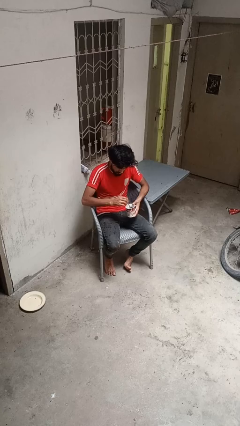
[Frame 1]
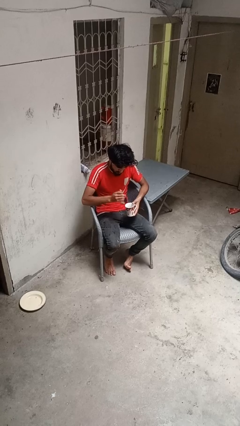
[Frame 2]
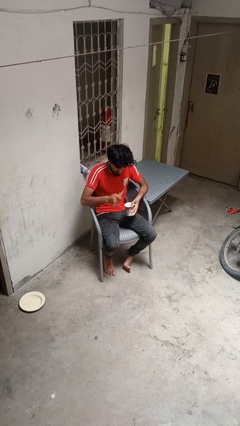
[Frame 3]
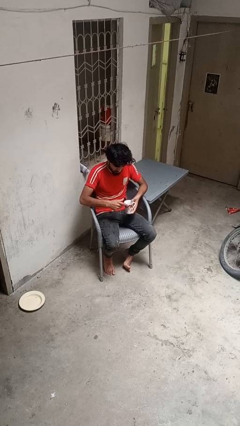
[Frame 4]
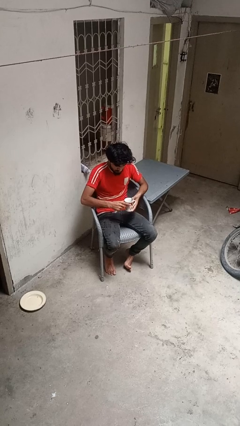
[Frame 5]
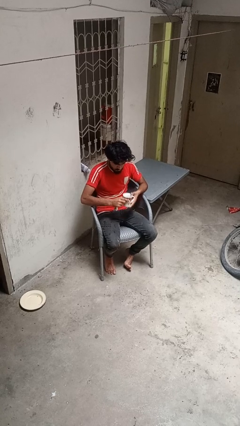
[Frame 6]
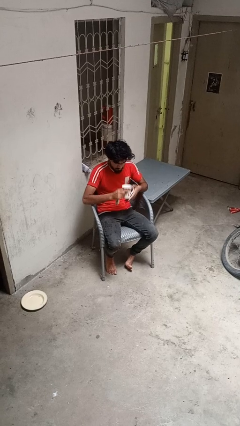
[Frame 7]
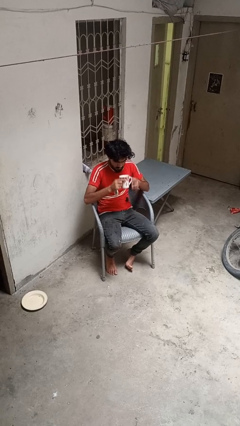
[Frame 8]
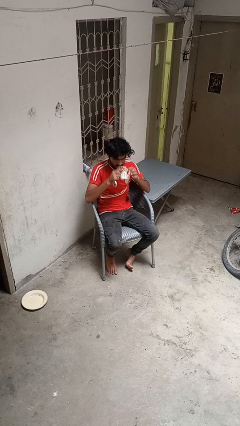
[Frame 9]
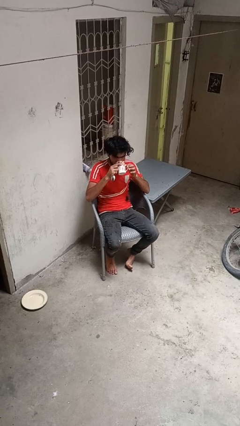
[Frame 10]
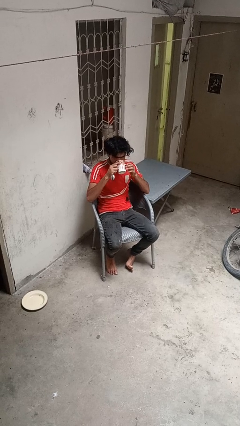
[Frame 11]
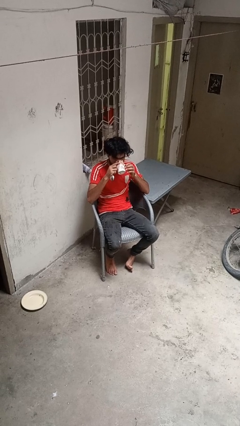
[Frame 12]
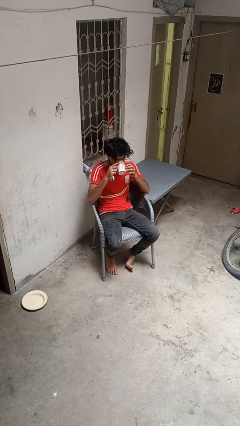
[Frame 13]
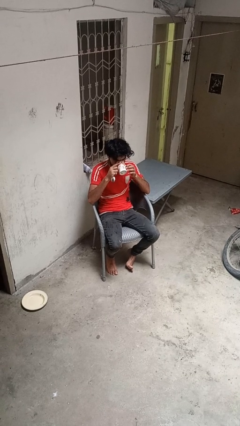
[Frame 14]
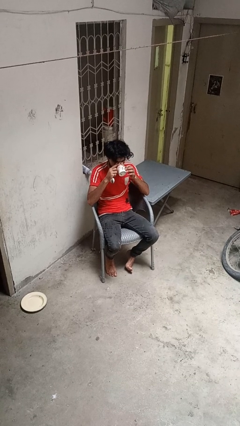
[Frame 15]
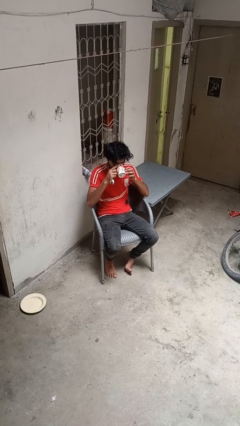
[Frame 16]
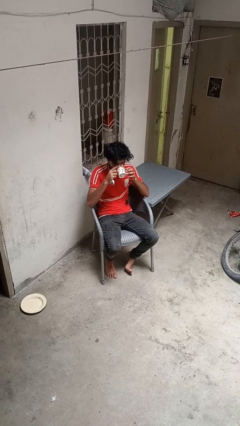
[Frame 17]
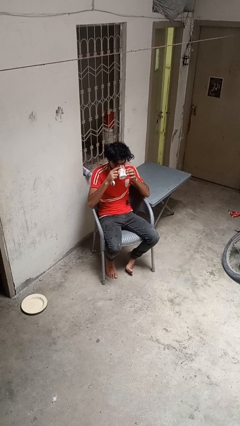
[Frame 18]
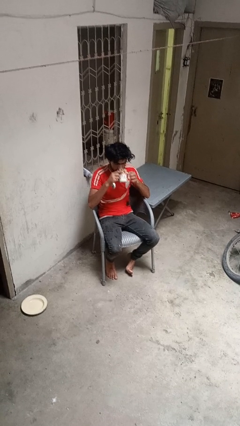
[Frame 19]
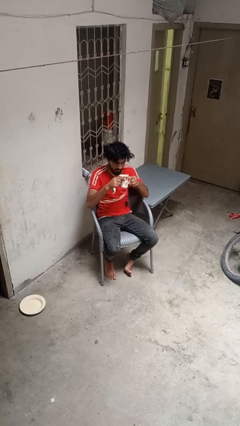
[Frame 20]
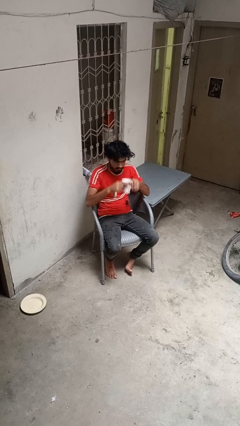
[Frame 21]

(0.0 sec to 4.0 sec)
person drinks from mug

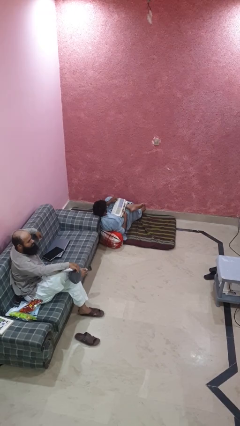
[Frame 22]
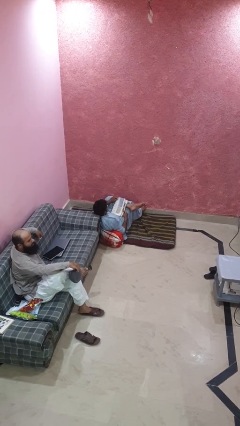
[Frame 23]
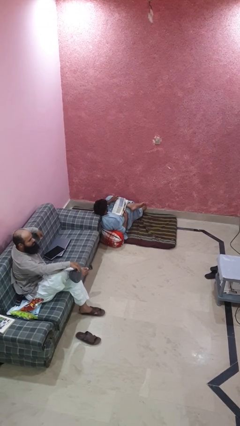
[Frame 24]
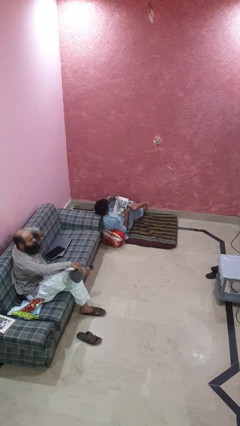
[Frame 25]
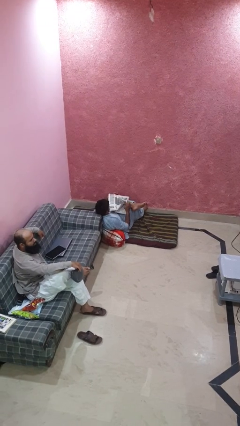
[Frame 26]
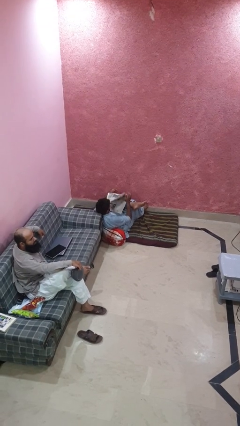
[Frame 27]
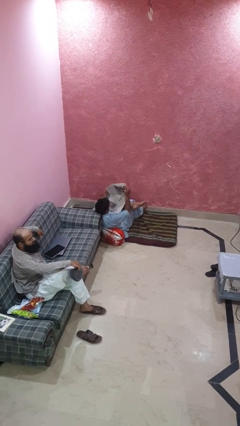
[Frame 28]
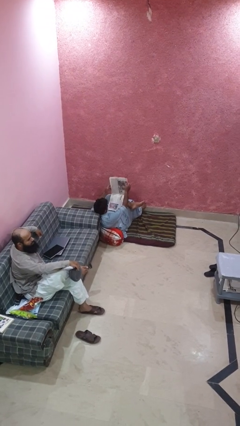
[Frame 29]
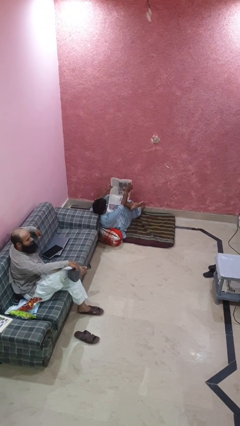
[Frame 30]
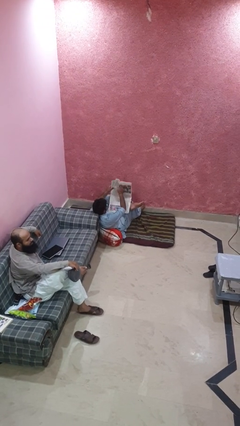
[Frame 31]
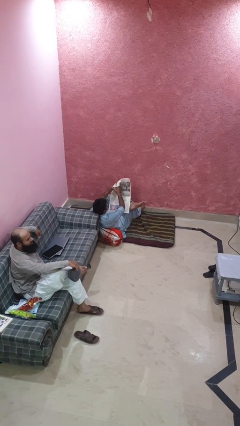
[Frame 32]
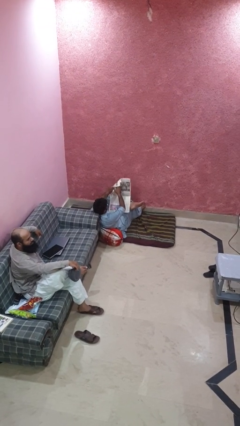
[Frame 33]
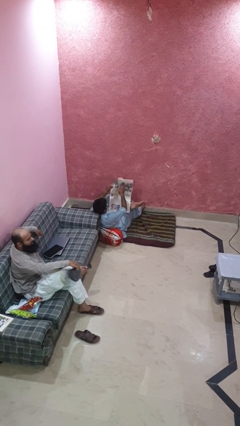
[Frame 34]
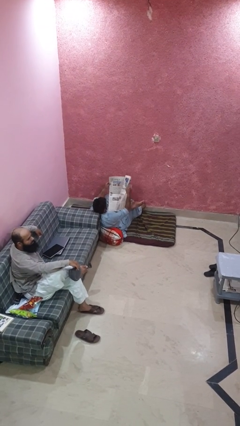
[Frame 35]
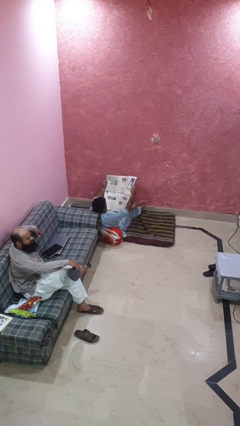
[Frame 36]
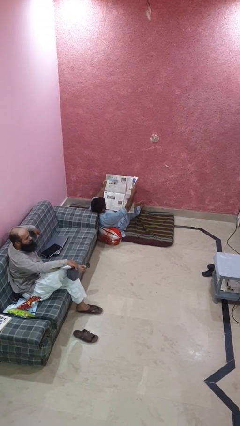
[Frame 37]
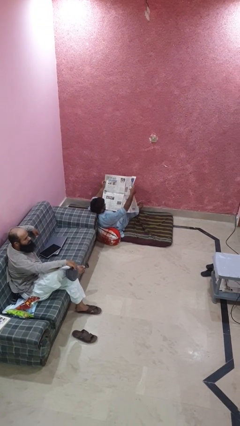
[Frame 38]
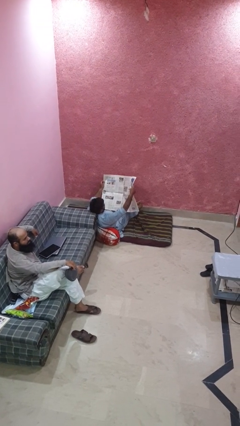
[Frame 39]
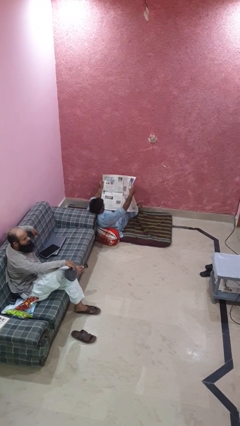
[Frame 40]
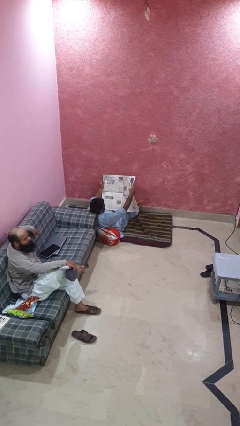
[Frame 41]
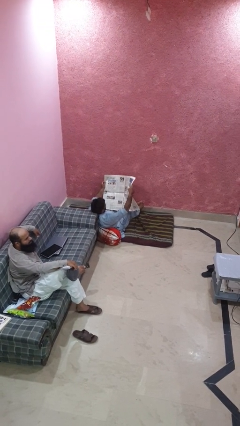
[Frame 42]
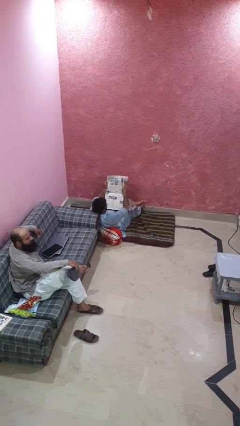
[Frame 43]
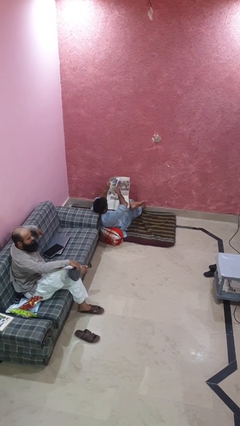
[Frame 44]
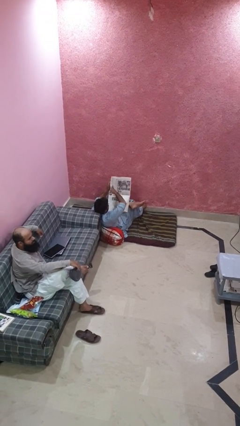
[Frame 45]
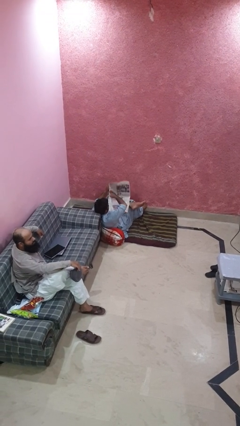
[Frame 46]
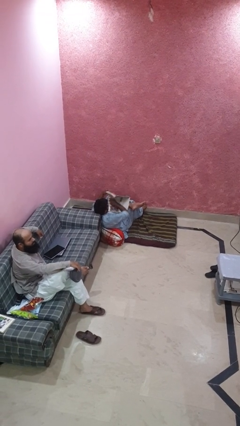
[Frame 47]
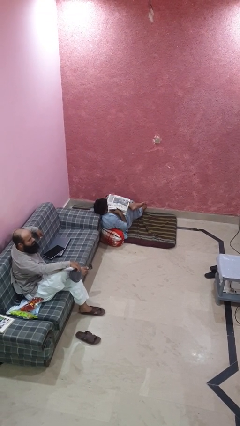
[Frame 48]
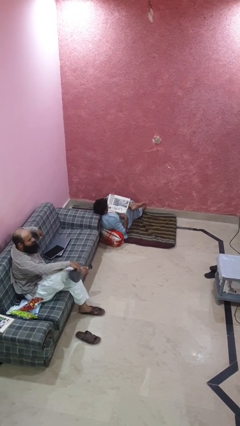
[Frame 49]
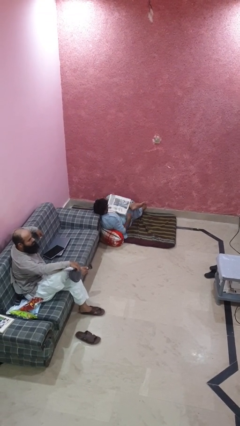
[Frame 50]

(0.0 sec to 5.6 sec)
person reads newspaper

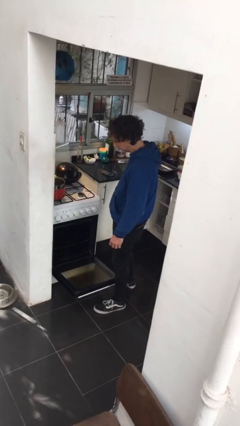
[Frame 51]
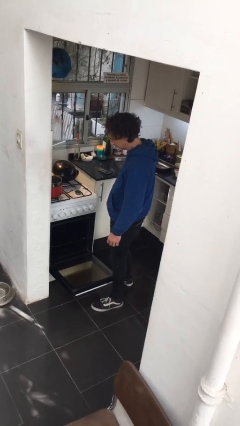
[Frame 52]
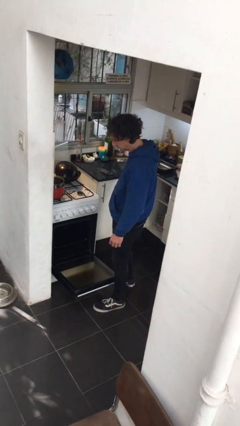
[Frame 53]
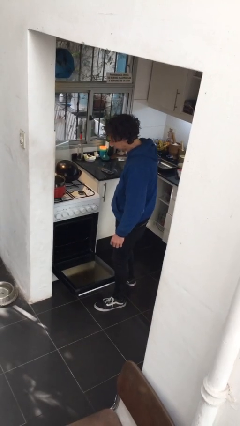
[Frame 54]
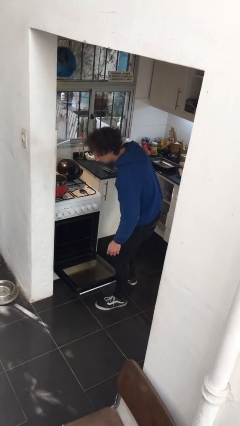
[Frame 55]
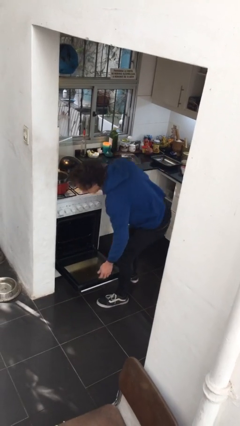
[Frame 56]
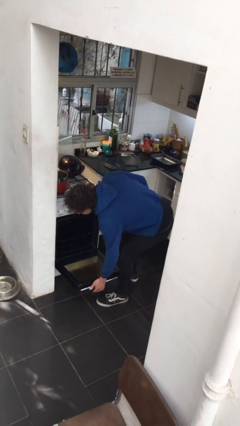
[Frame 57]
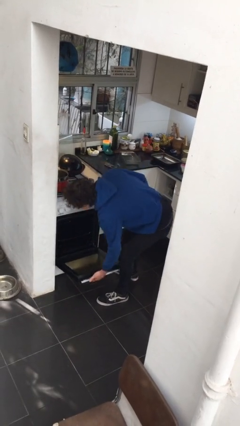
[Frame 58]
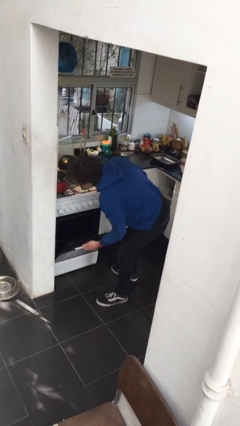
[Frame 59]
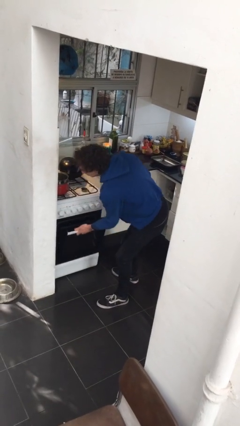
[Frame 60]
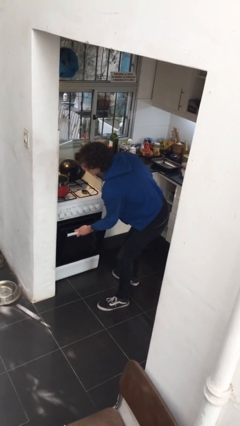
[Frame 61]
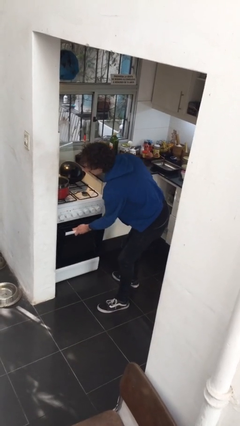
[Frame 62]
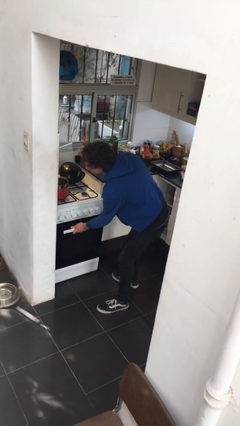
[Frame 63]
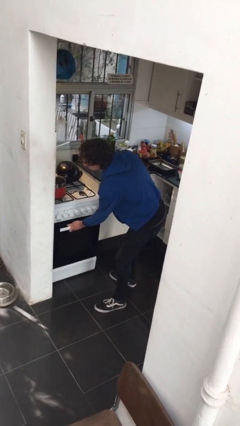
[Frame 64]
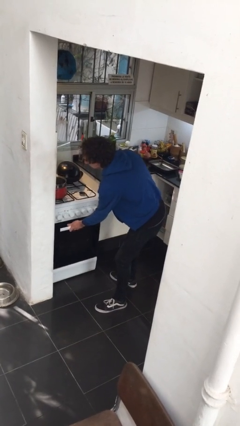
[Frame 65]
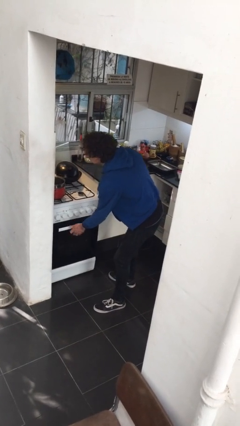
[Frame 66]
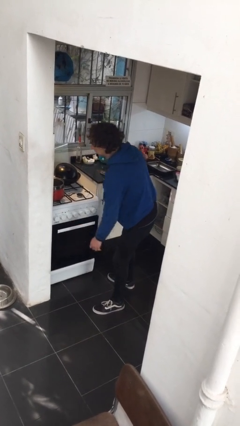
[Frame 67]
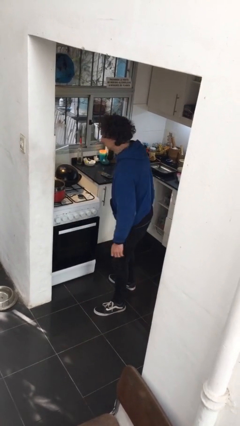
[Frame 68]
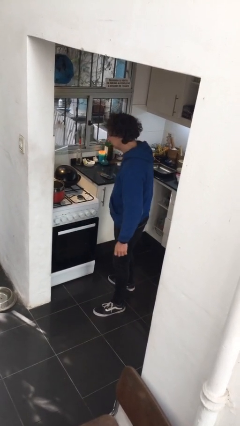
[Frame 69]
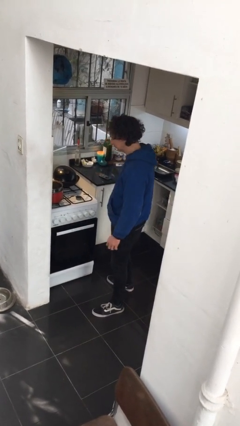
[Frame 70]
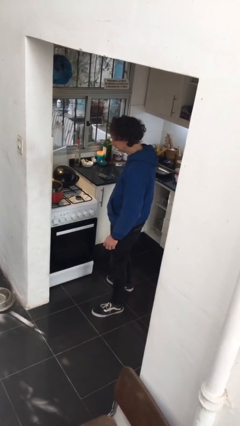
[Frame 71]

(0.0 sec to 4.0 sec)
person closes oven door

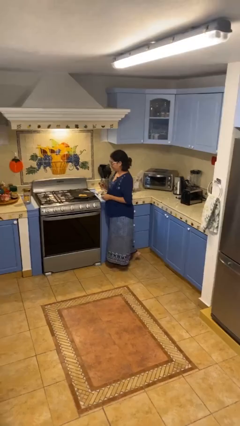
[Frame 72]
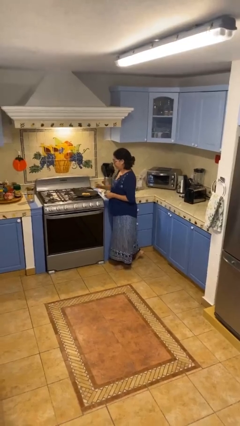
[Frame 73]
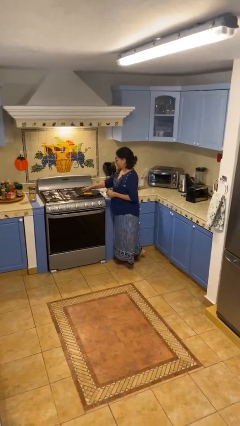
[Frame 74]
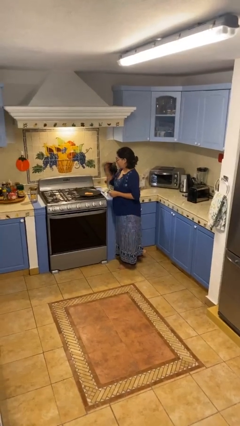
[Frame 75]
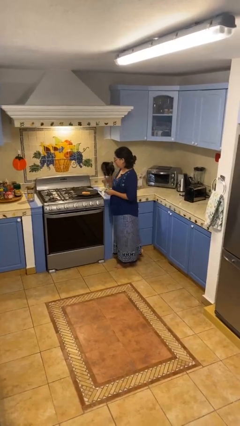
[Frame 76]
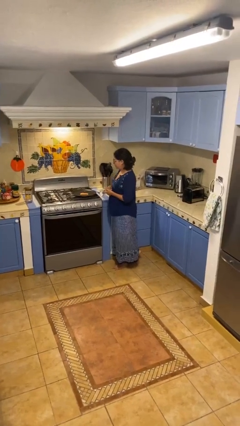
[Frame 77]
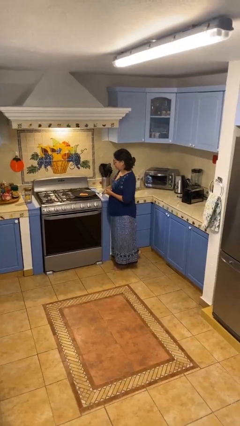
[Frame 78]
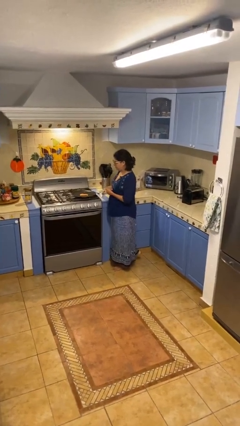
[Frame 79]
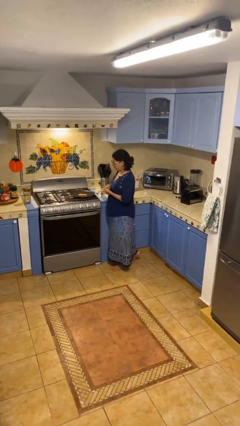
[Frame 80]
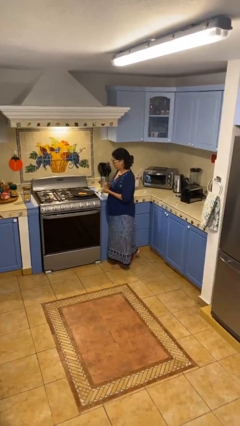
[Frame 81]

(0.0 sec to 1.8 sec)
person burns hand

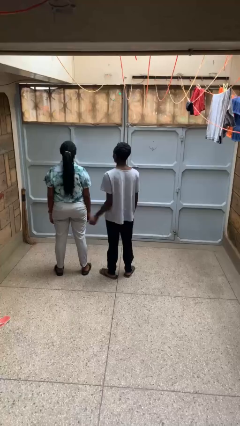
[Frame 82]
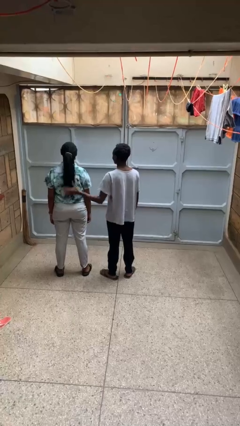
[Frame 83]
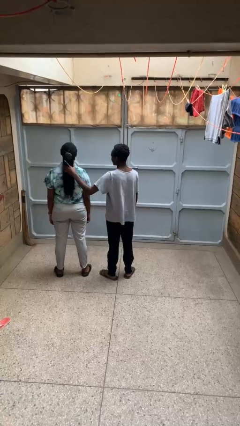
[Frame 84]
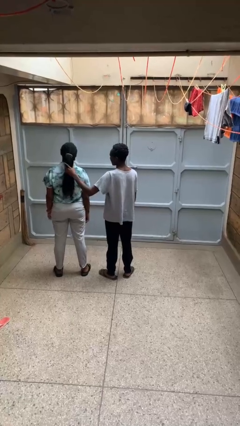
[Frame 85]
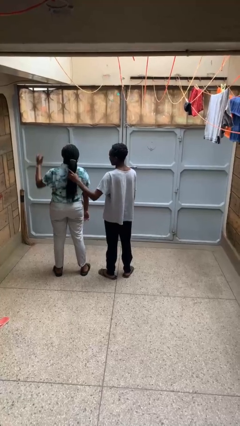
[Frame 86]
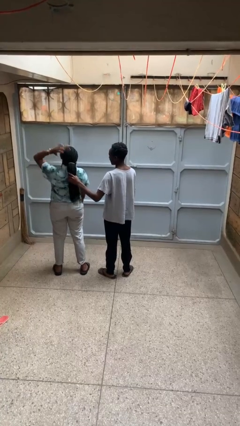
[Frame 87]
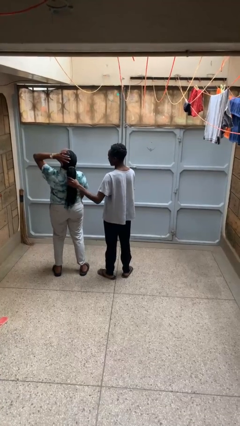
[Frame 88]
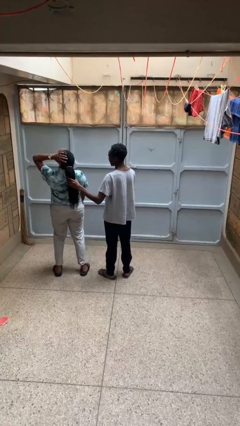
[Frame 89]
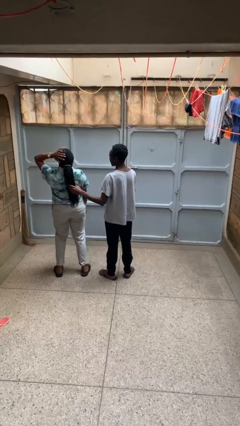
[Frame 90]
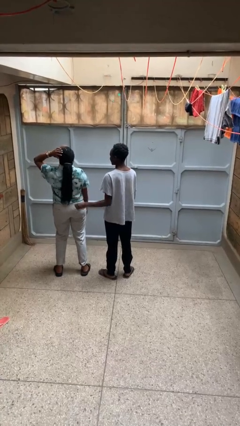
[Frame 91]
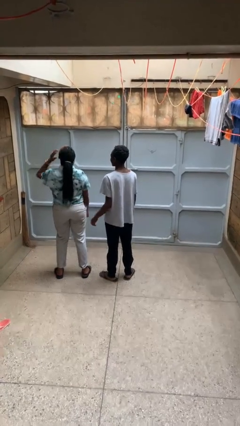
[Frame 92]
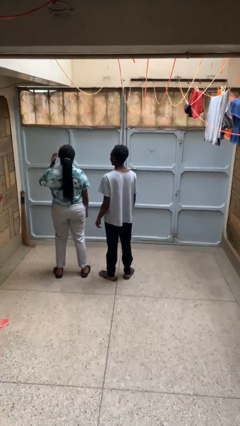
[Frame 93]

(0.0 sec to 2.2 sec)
person grabs person by hair

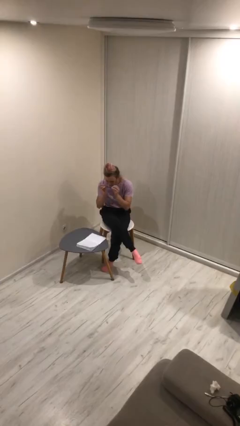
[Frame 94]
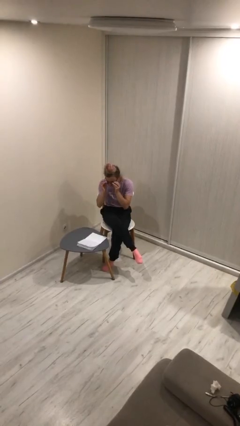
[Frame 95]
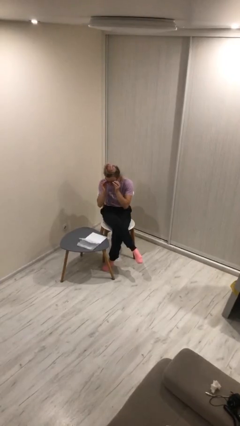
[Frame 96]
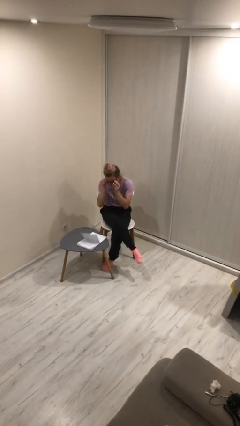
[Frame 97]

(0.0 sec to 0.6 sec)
person puts on glasses
